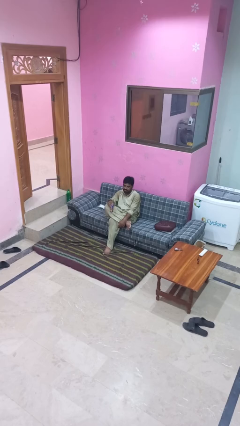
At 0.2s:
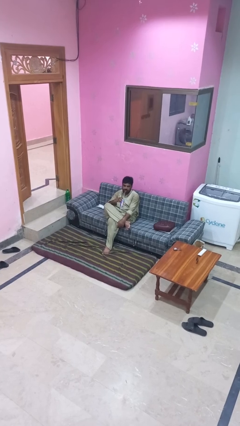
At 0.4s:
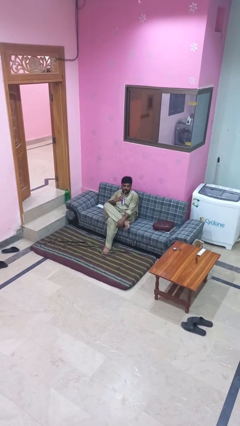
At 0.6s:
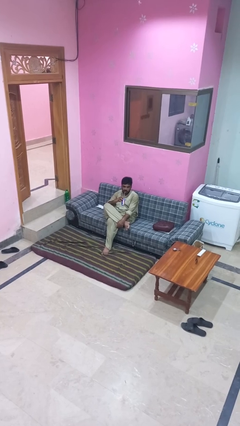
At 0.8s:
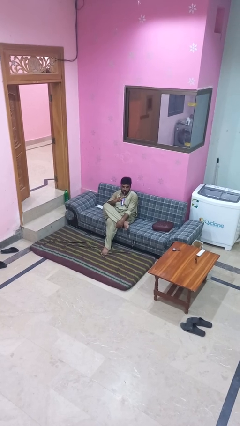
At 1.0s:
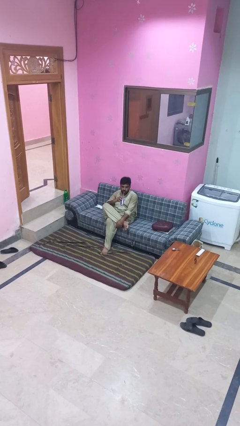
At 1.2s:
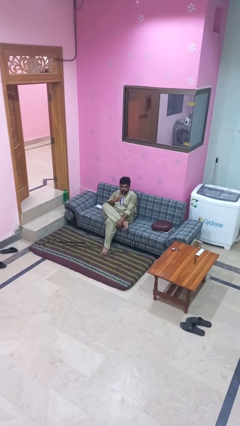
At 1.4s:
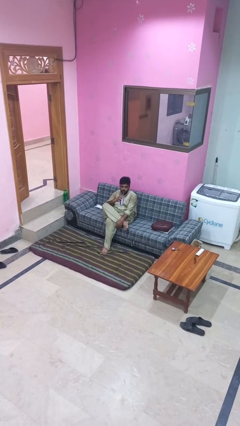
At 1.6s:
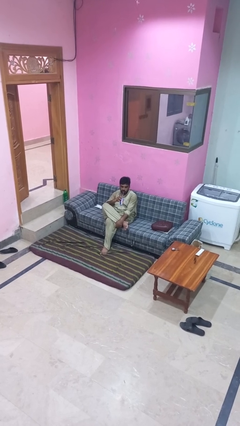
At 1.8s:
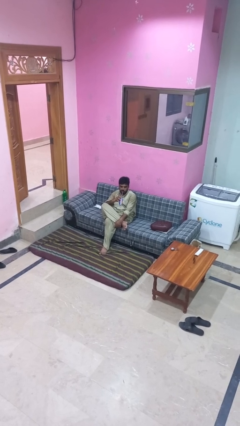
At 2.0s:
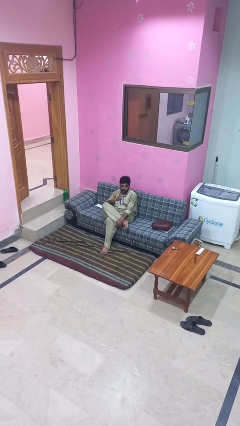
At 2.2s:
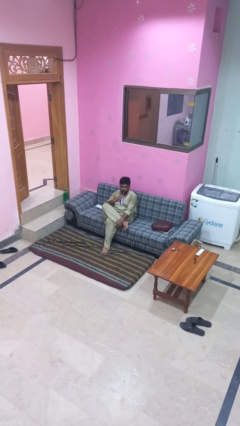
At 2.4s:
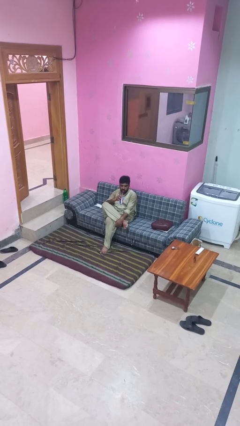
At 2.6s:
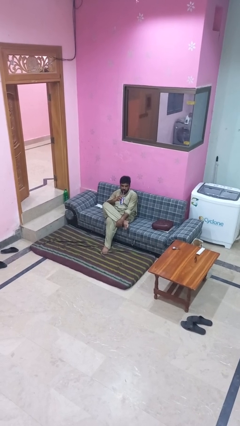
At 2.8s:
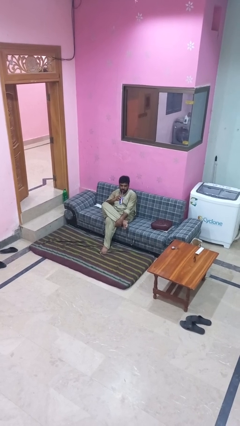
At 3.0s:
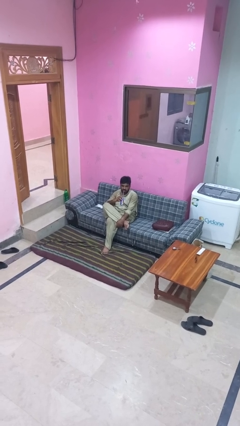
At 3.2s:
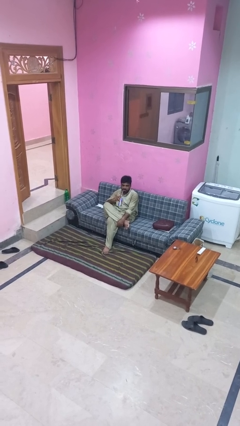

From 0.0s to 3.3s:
person drinks from straw

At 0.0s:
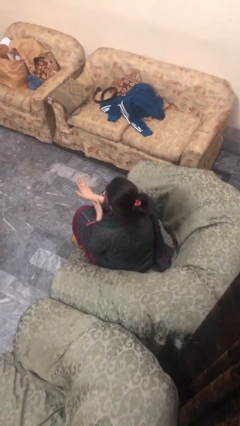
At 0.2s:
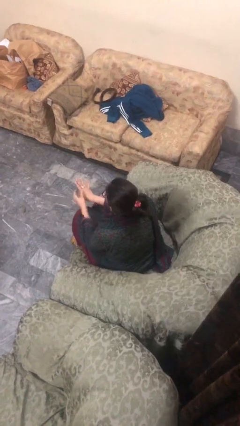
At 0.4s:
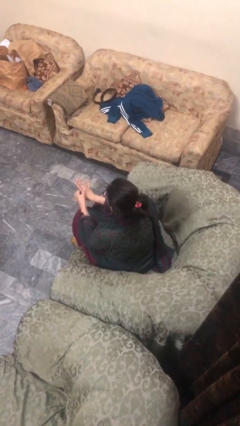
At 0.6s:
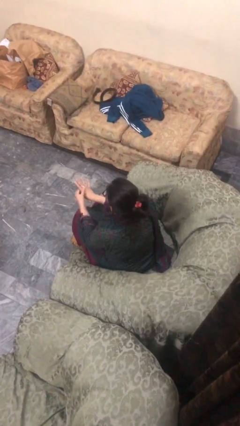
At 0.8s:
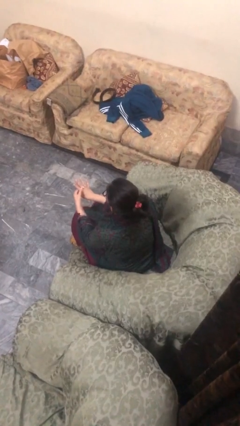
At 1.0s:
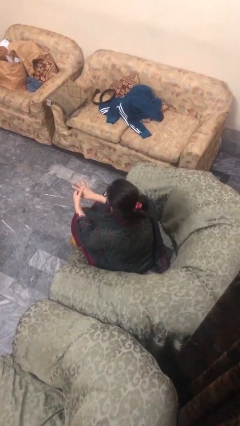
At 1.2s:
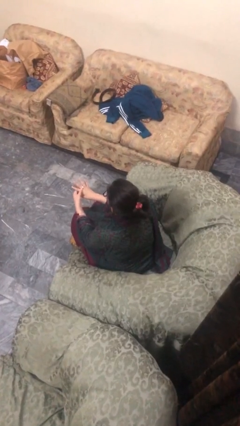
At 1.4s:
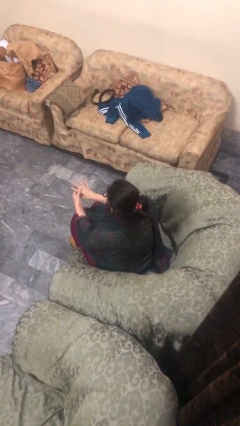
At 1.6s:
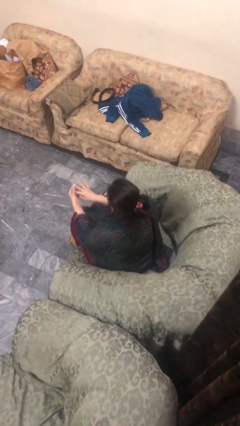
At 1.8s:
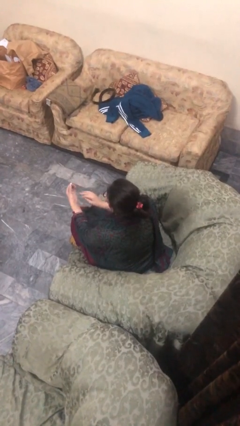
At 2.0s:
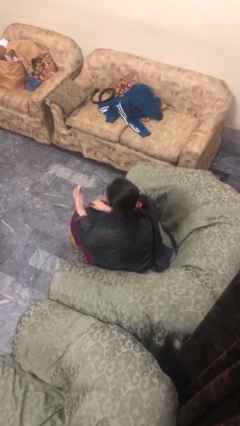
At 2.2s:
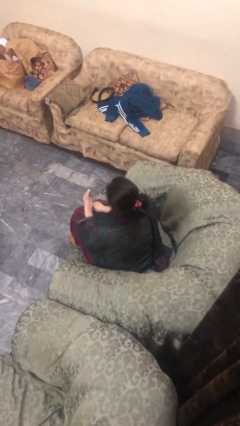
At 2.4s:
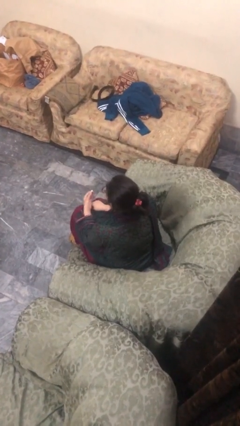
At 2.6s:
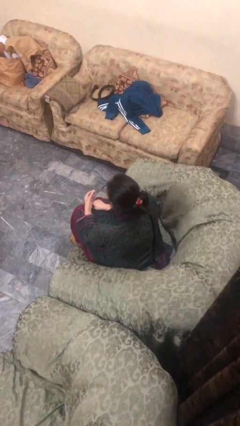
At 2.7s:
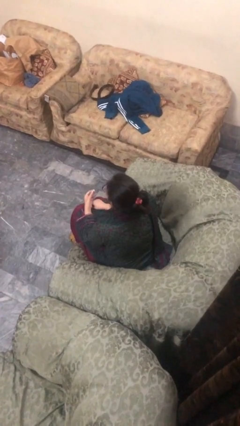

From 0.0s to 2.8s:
person takes off ring

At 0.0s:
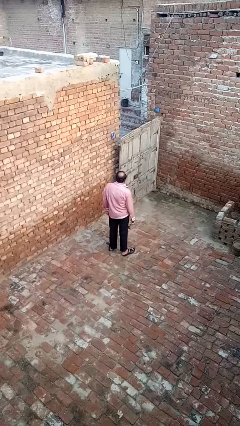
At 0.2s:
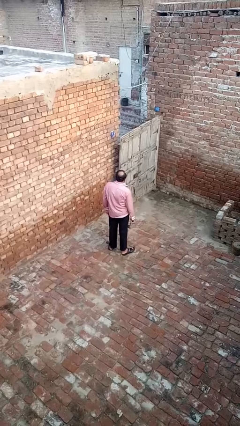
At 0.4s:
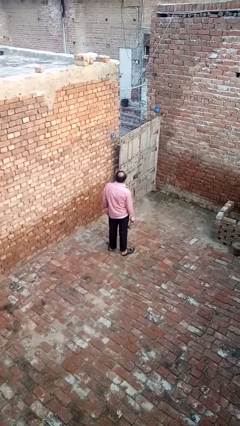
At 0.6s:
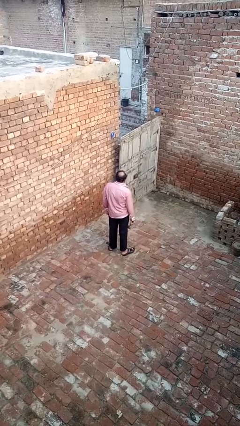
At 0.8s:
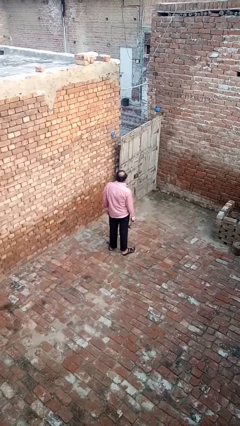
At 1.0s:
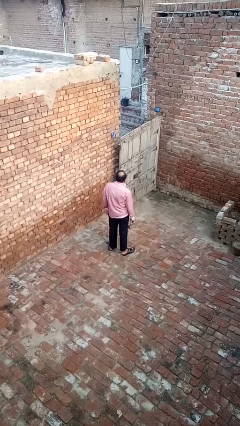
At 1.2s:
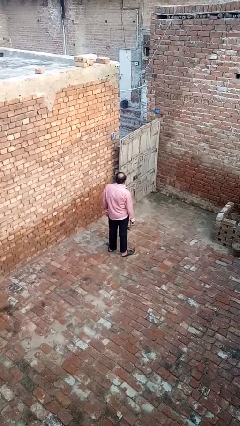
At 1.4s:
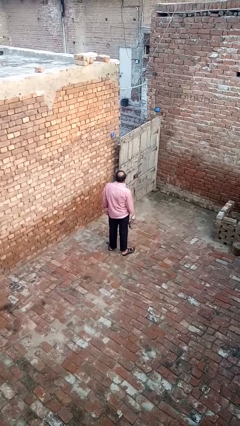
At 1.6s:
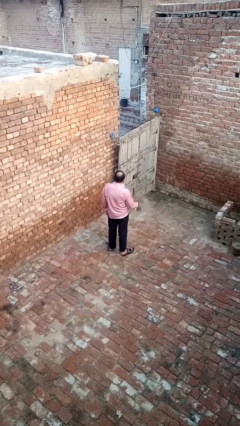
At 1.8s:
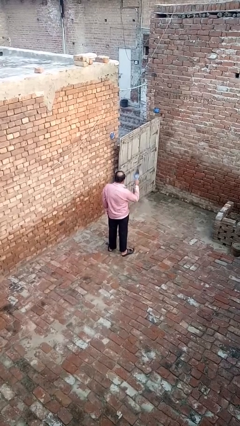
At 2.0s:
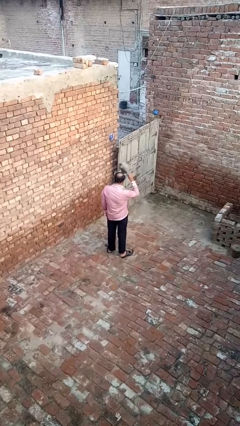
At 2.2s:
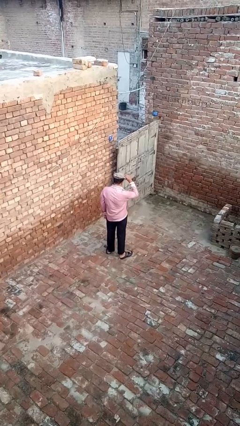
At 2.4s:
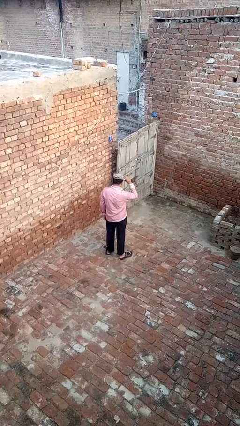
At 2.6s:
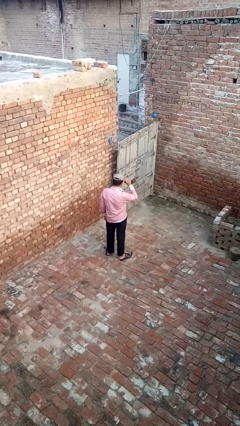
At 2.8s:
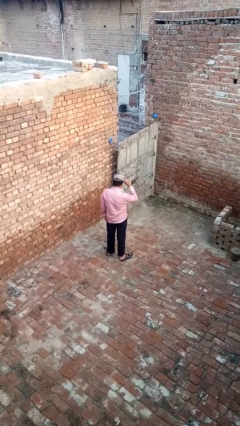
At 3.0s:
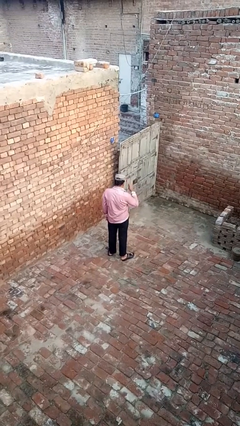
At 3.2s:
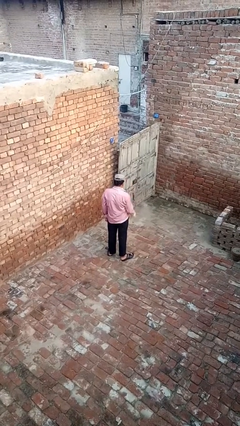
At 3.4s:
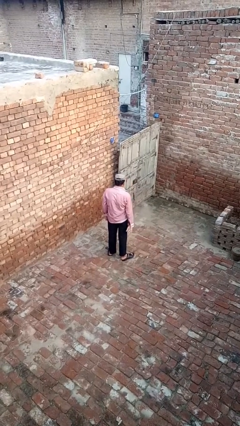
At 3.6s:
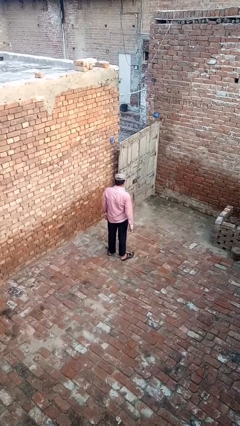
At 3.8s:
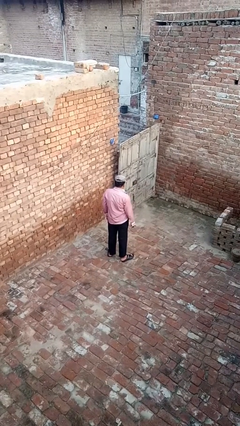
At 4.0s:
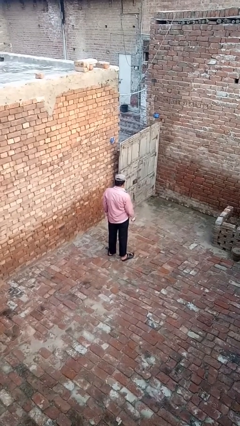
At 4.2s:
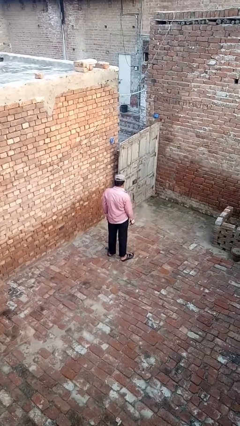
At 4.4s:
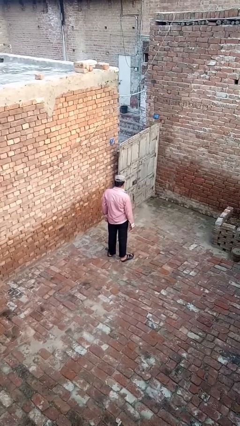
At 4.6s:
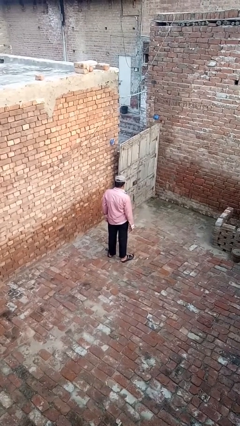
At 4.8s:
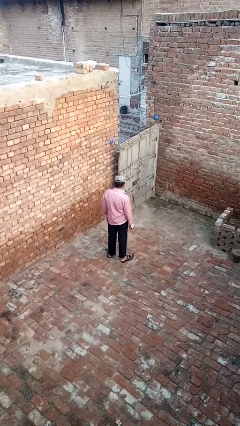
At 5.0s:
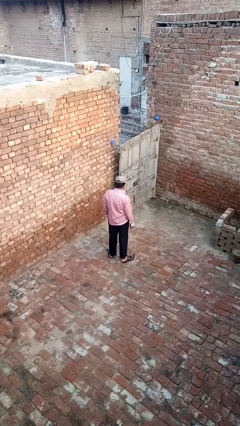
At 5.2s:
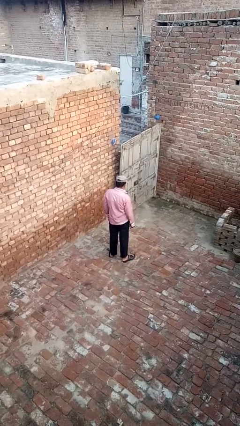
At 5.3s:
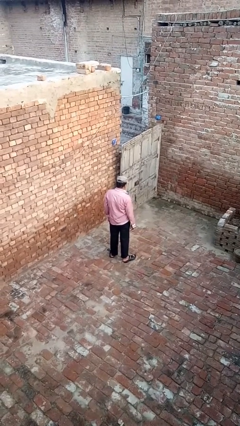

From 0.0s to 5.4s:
person puts on hat

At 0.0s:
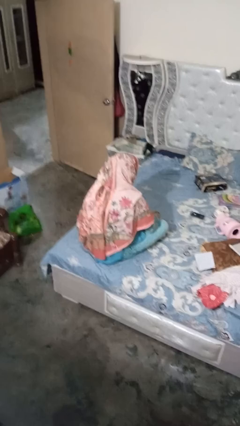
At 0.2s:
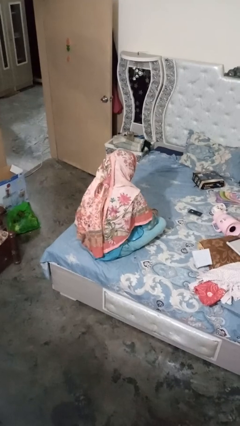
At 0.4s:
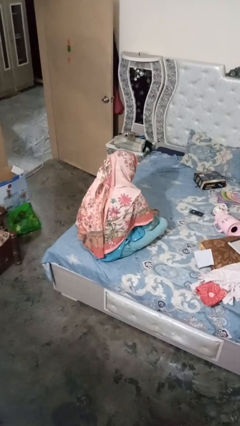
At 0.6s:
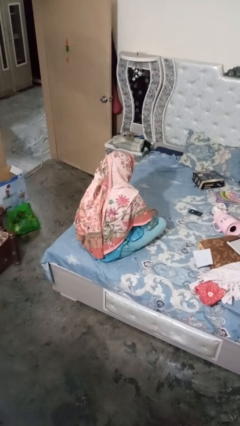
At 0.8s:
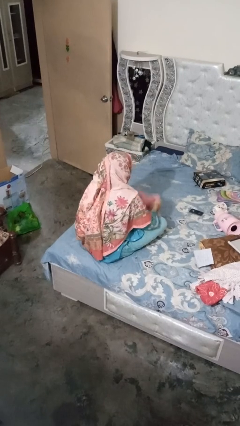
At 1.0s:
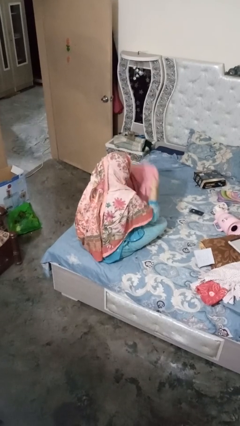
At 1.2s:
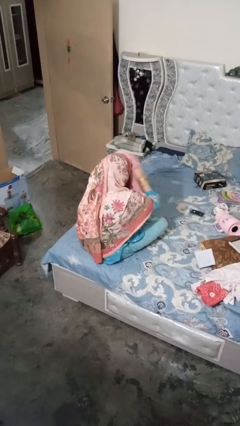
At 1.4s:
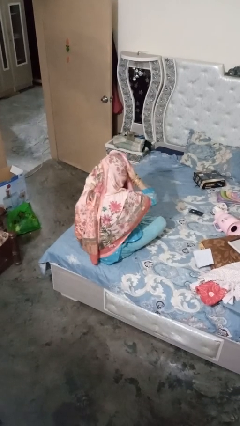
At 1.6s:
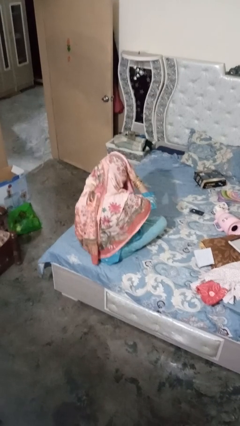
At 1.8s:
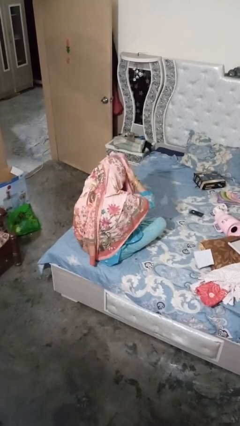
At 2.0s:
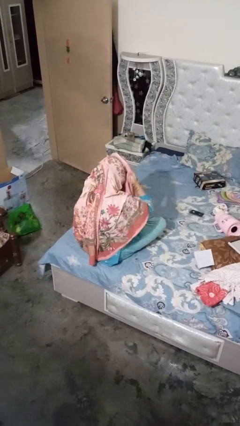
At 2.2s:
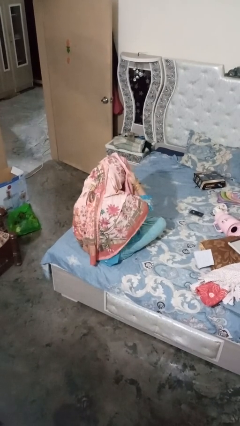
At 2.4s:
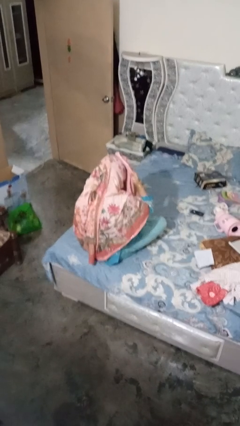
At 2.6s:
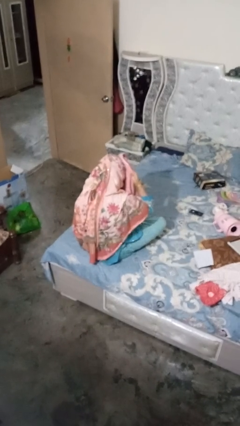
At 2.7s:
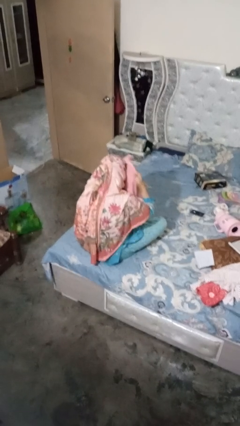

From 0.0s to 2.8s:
person dries hair with hairdryer

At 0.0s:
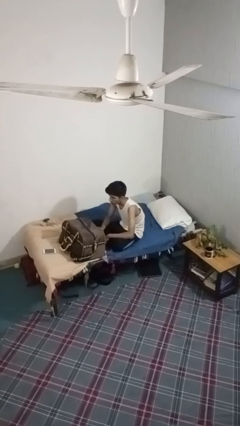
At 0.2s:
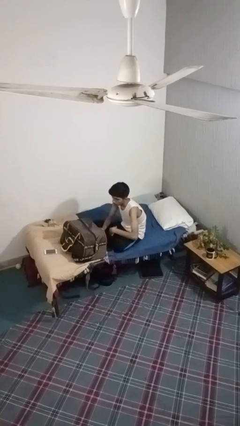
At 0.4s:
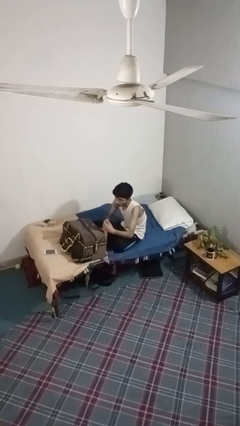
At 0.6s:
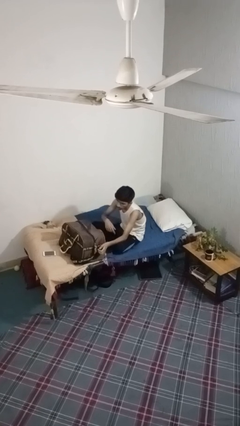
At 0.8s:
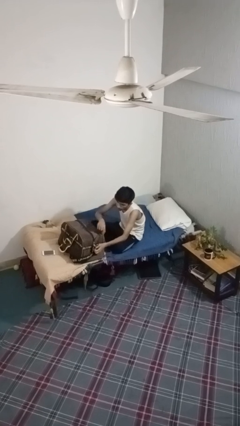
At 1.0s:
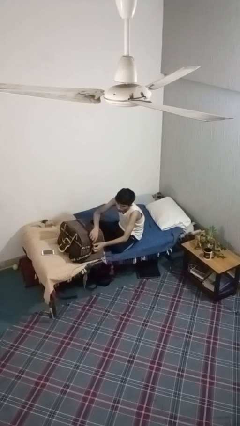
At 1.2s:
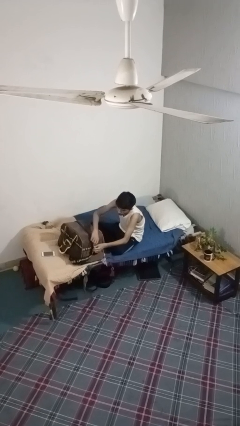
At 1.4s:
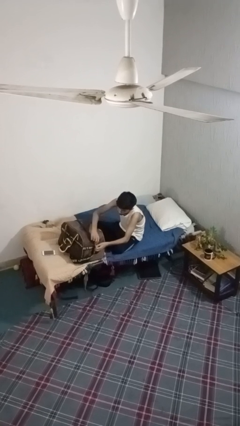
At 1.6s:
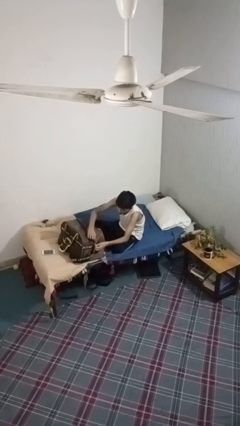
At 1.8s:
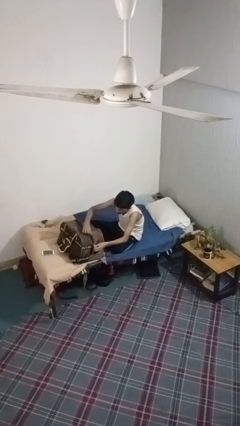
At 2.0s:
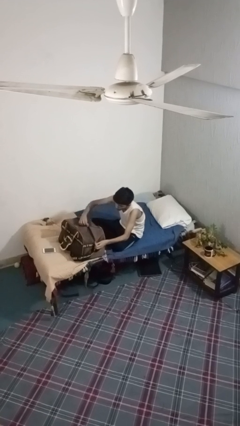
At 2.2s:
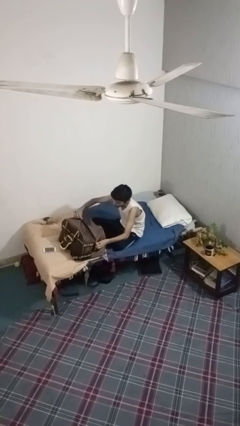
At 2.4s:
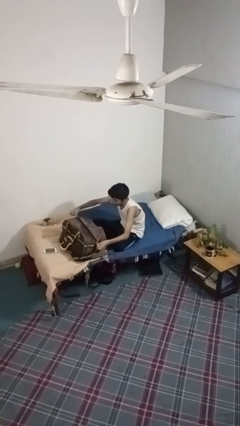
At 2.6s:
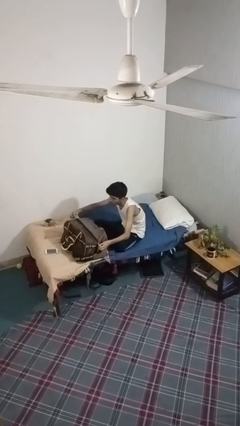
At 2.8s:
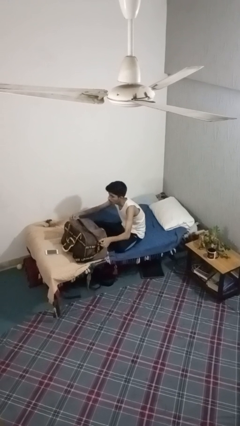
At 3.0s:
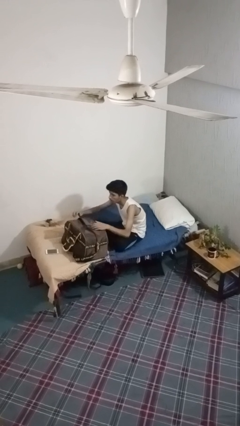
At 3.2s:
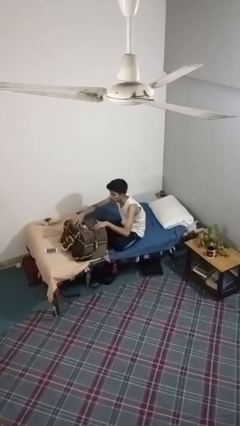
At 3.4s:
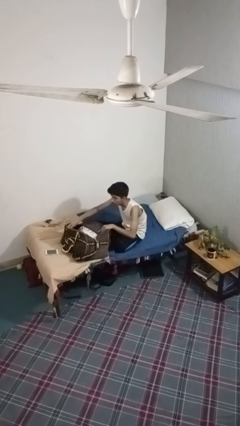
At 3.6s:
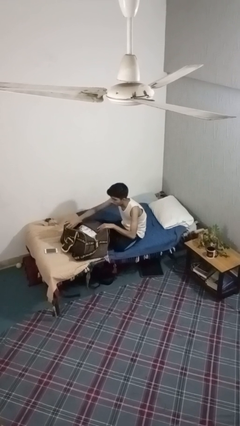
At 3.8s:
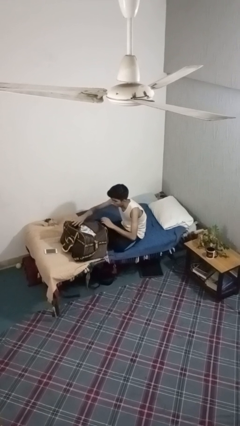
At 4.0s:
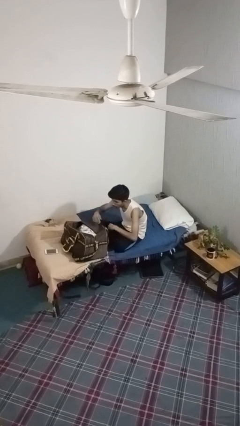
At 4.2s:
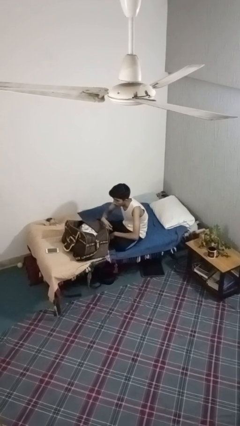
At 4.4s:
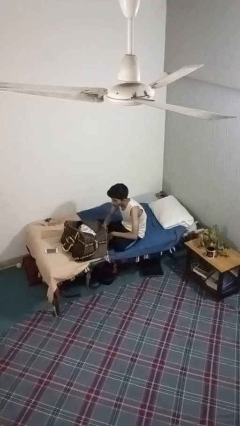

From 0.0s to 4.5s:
person opens suitcase
